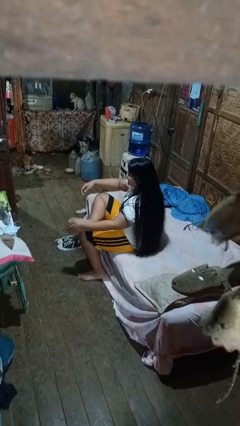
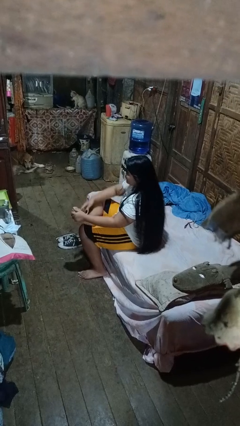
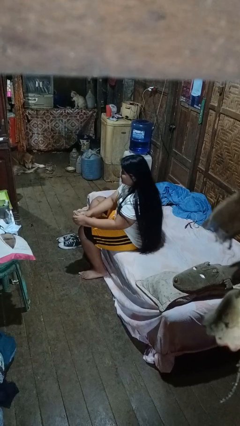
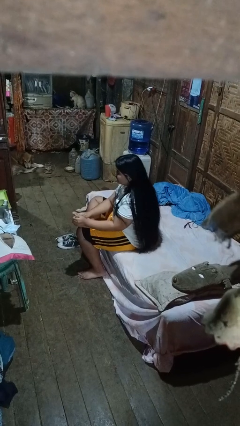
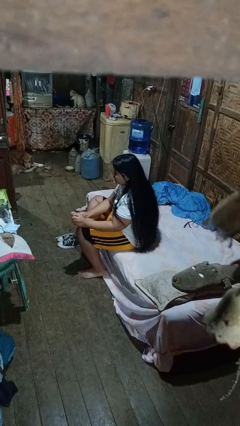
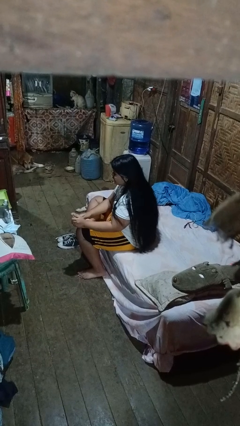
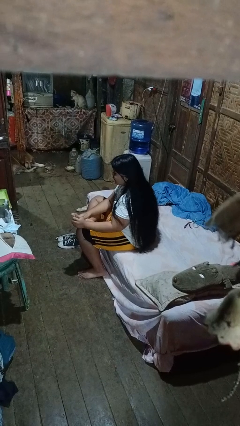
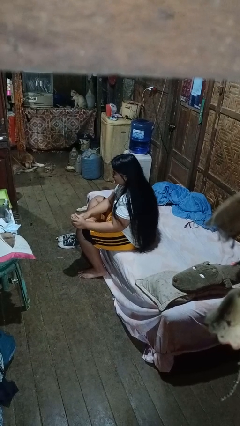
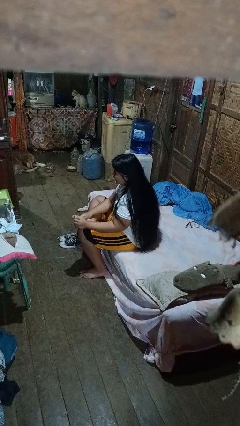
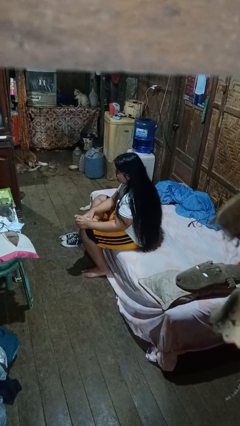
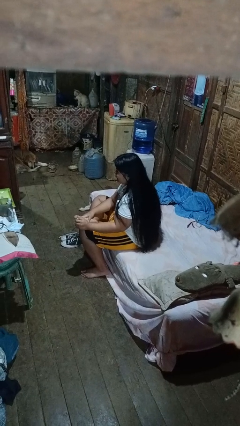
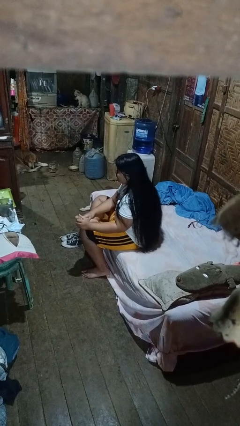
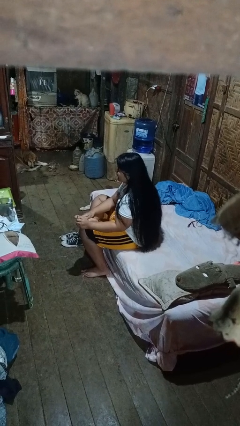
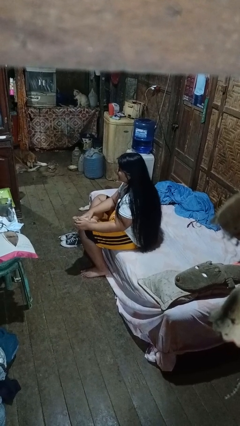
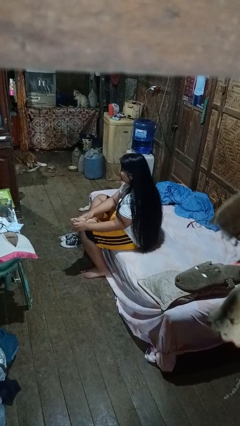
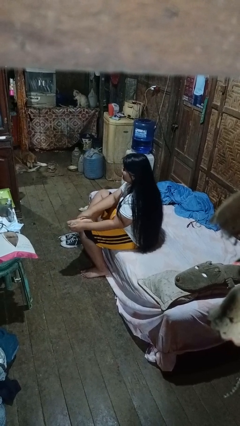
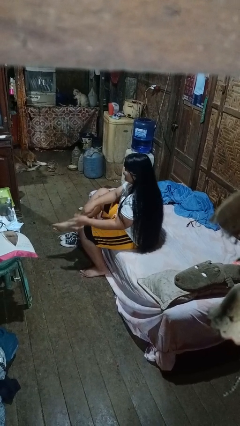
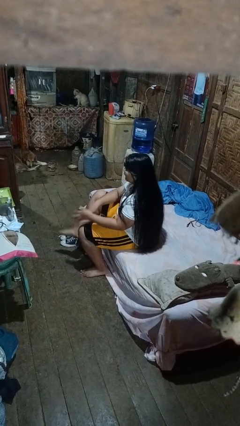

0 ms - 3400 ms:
person rubs foot

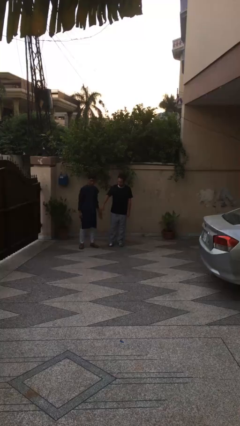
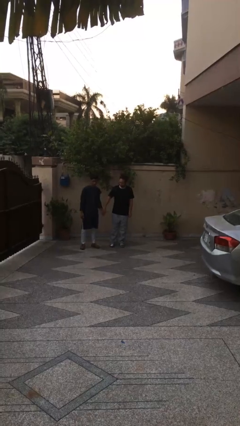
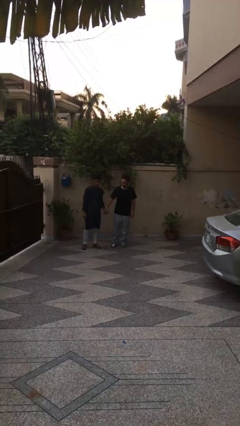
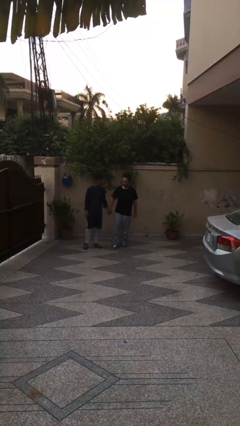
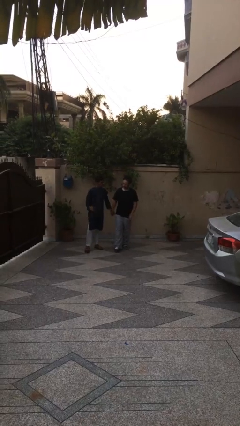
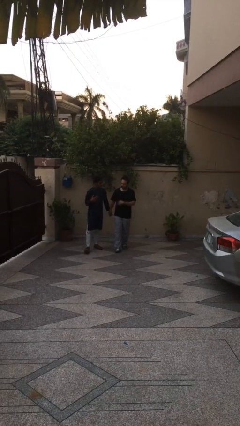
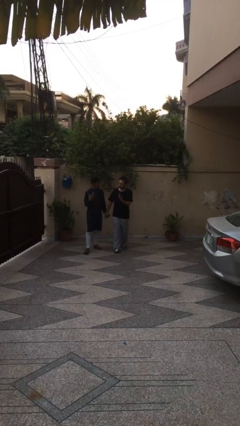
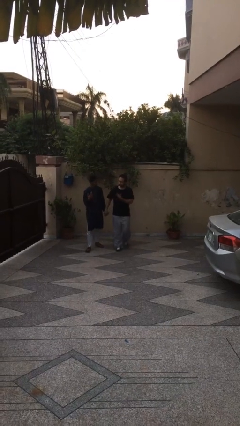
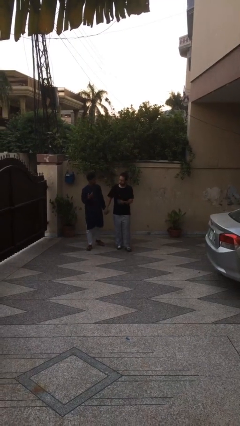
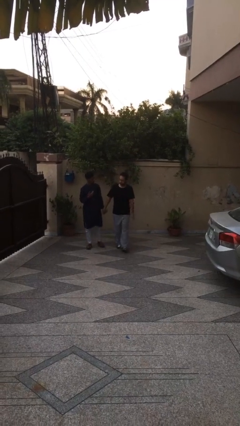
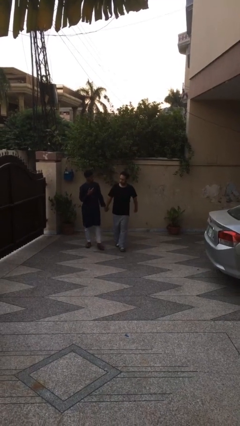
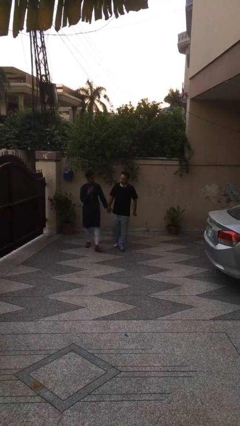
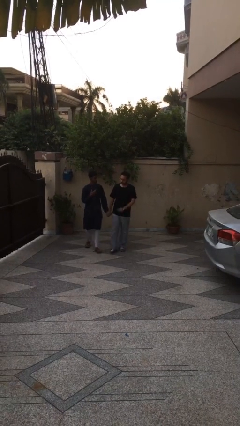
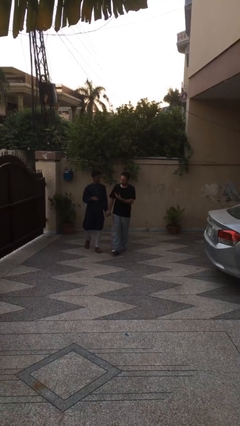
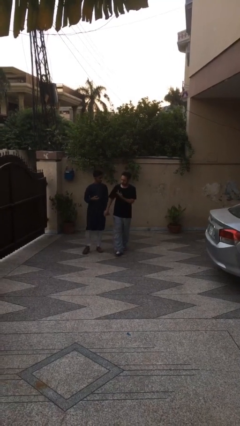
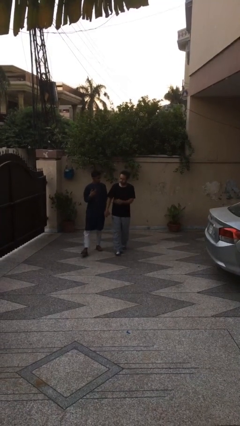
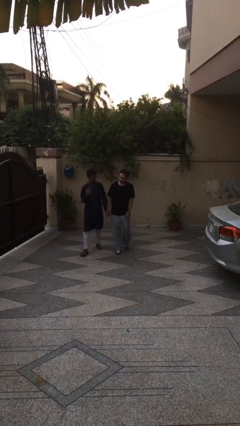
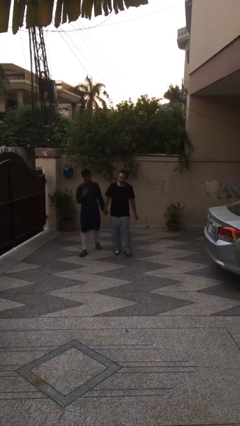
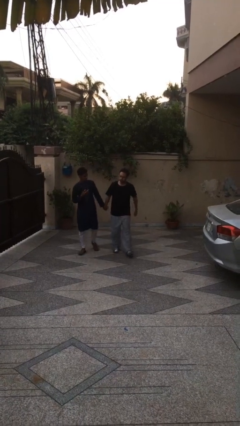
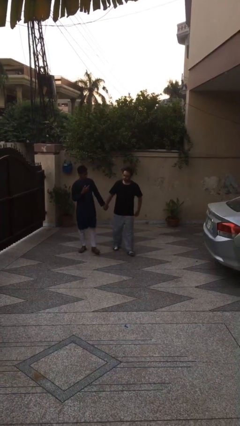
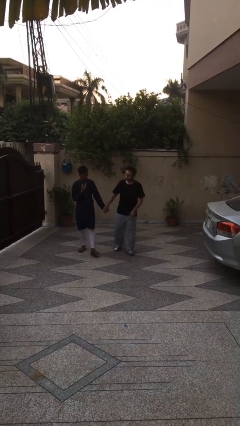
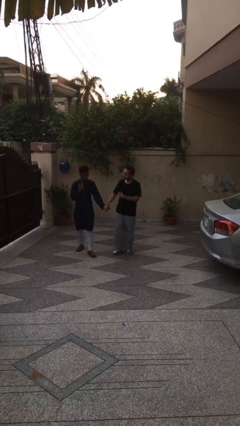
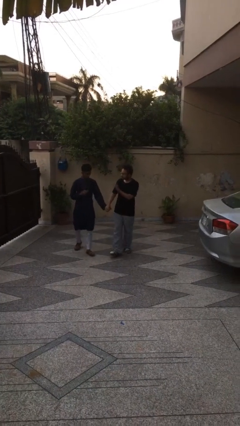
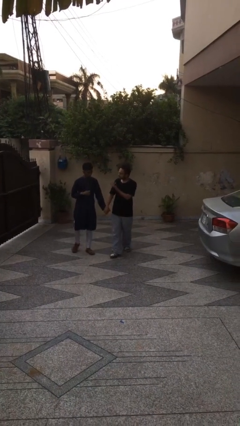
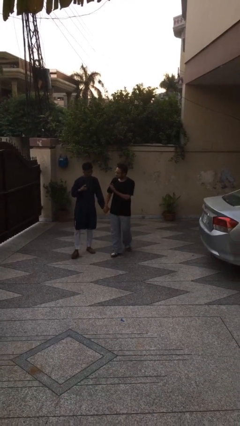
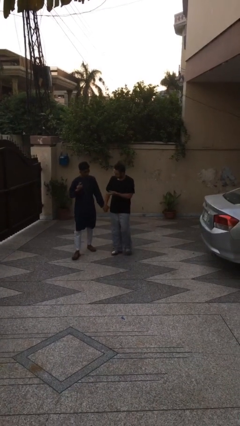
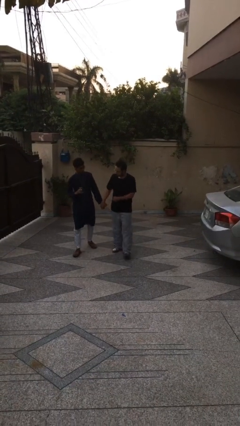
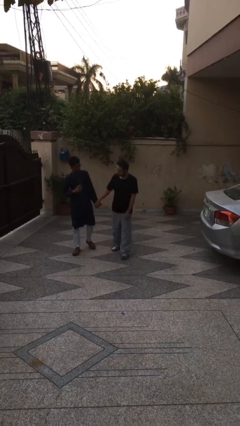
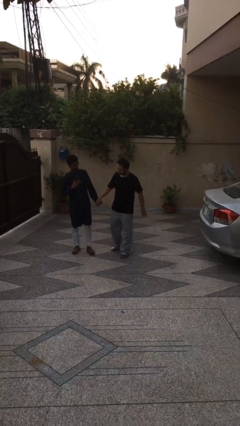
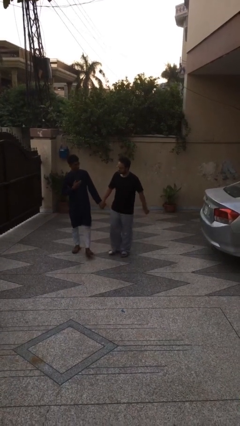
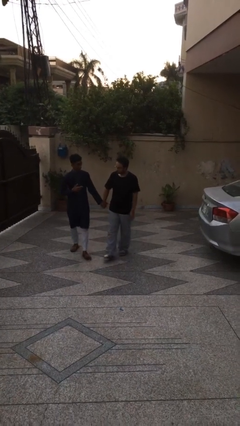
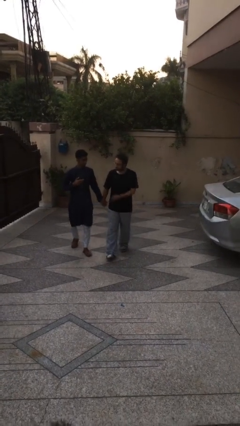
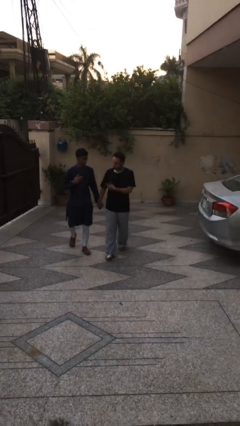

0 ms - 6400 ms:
person holds hand

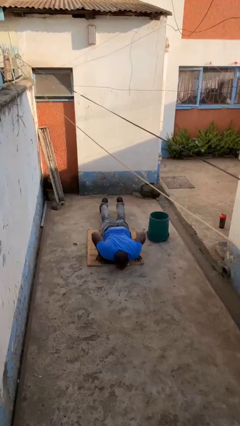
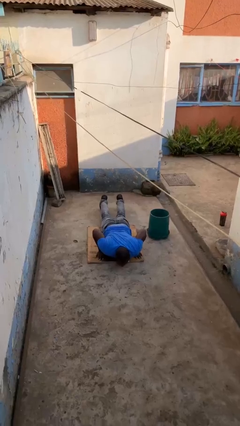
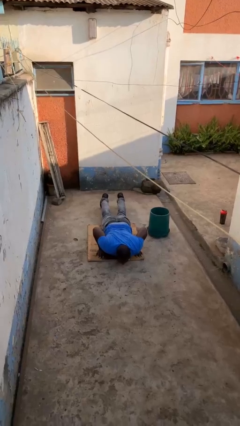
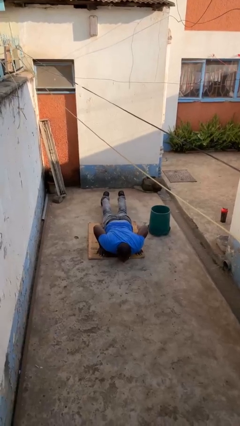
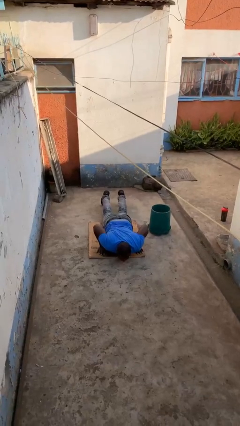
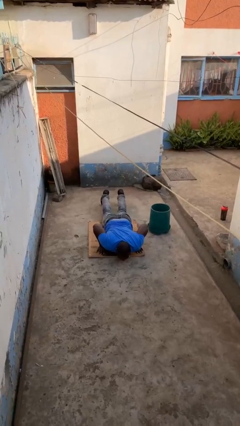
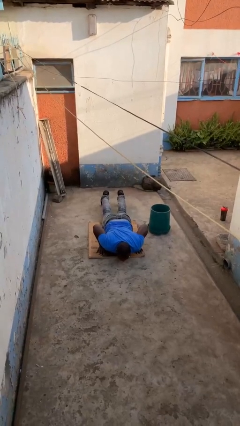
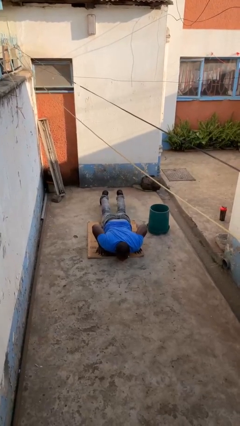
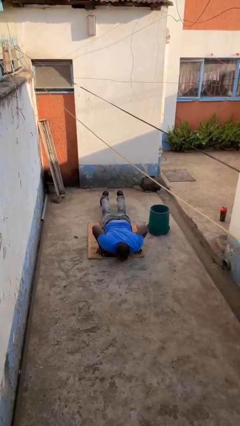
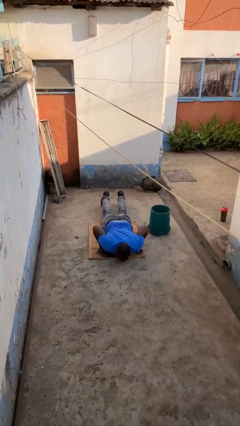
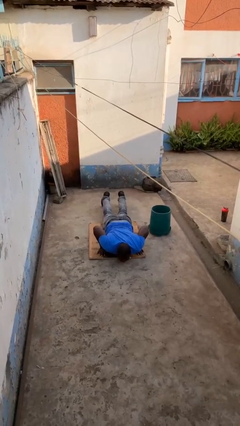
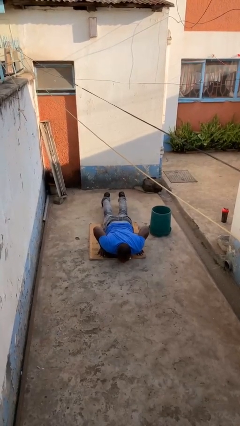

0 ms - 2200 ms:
person lies down on floor

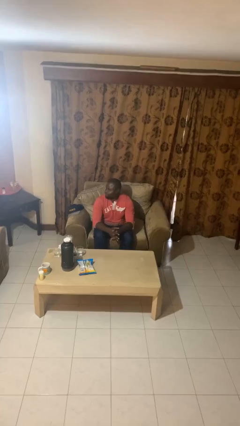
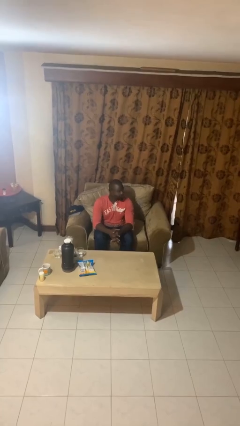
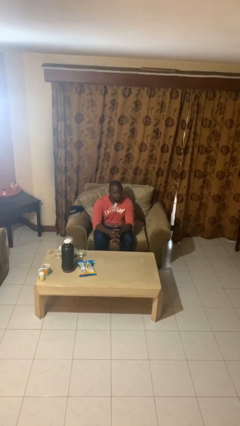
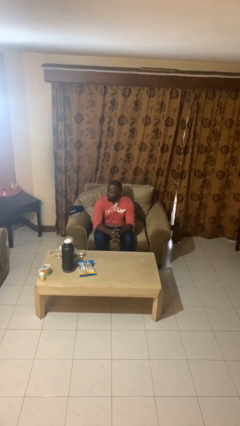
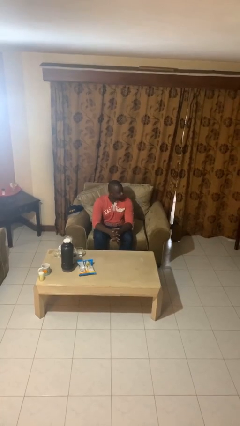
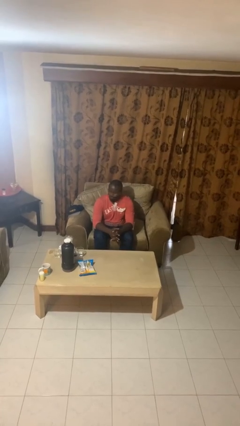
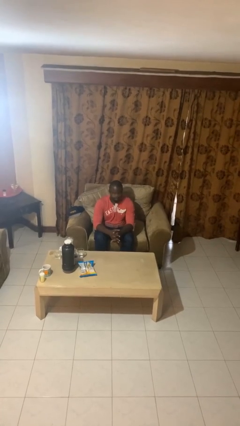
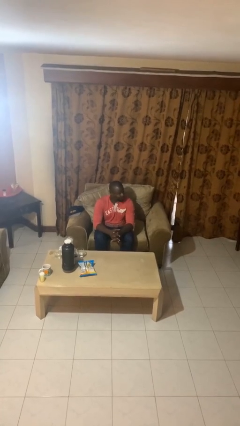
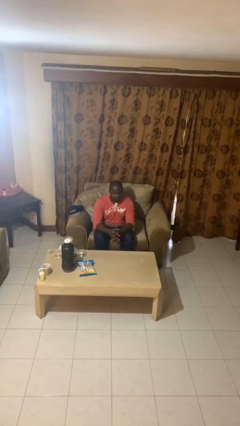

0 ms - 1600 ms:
person shakes head

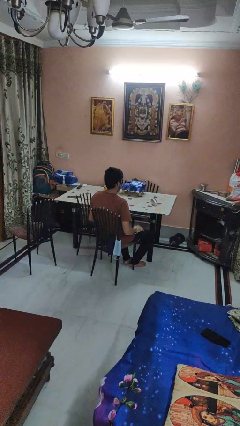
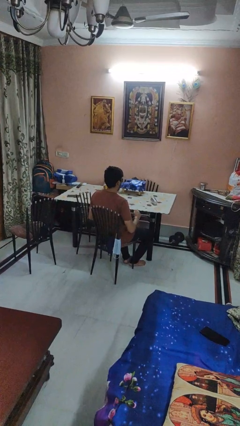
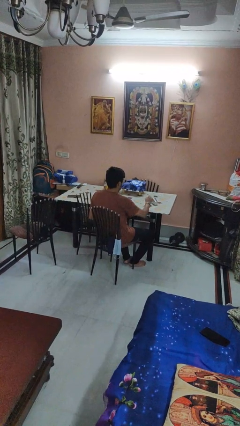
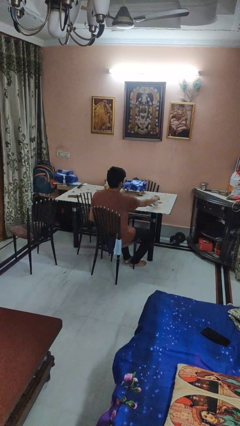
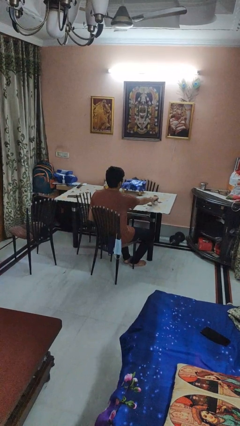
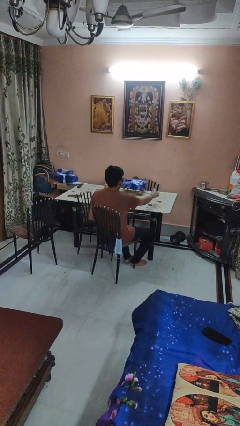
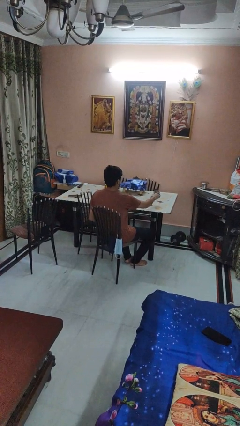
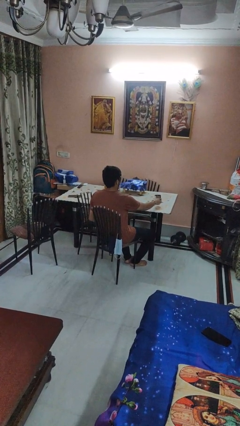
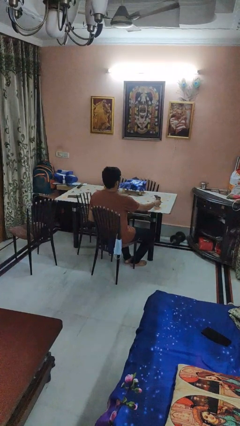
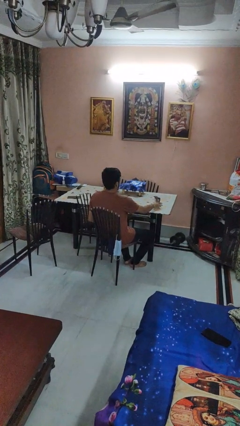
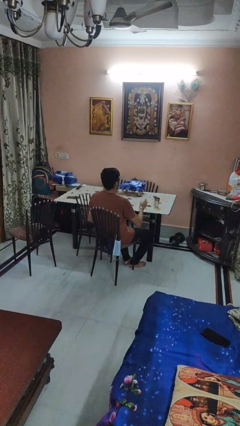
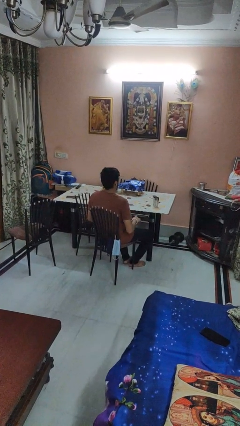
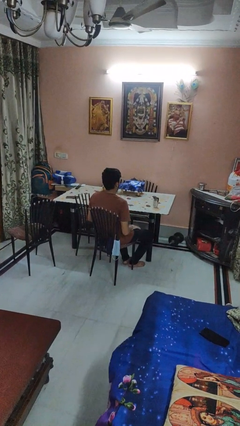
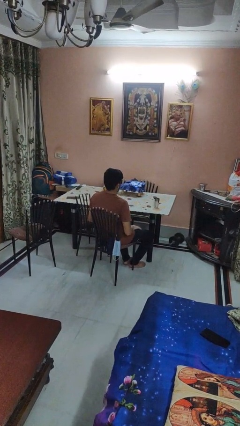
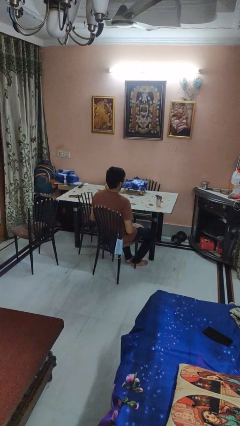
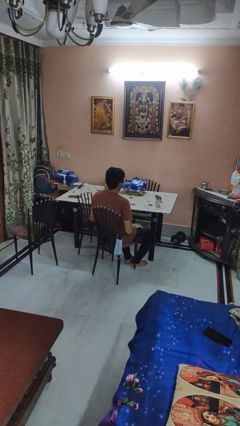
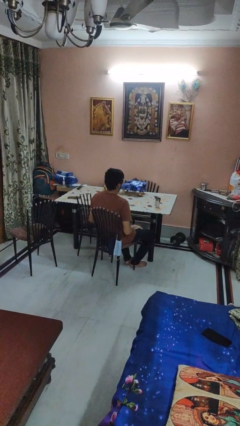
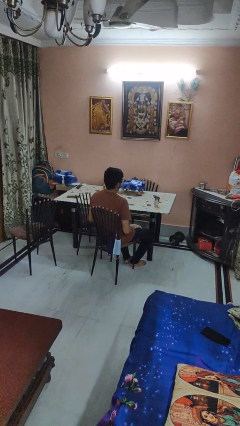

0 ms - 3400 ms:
person sets upright glass

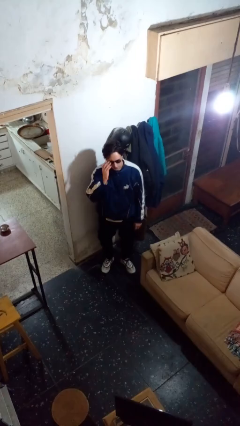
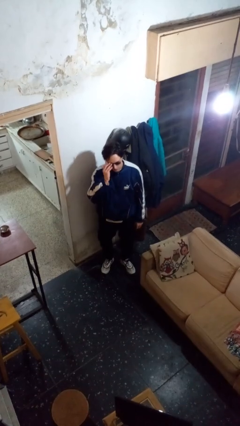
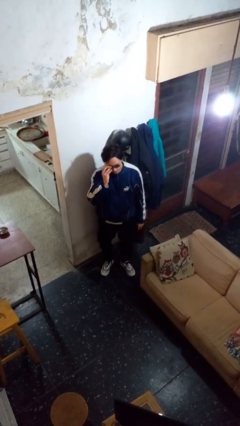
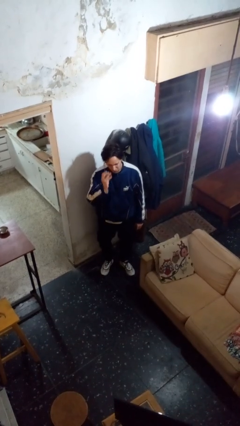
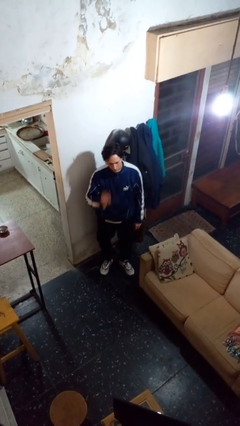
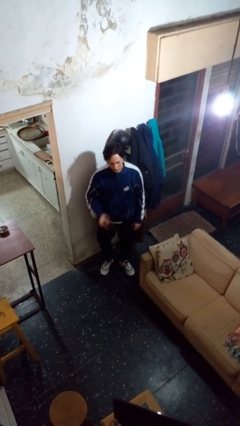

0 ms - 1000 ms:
person takes off sunglasses
